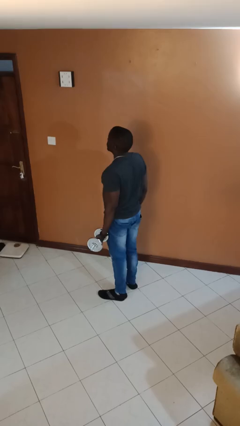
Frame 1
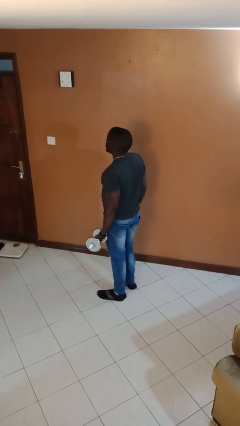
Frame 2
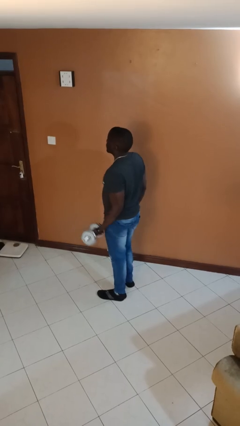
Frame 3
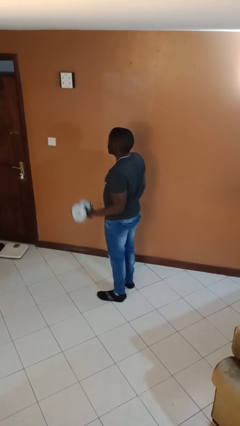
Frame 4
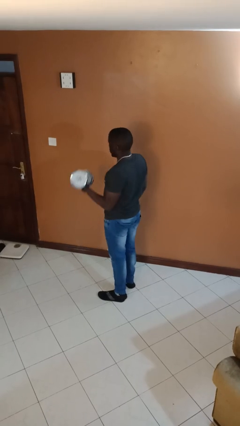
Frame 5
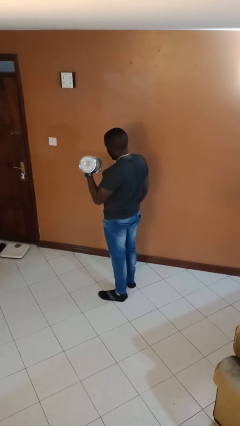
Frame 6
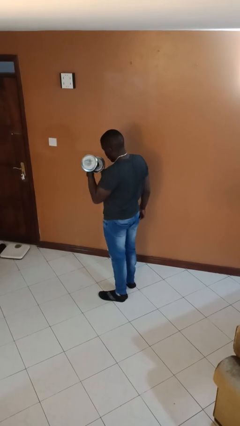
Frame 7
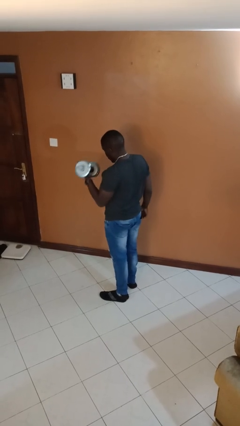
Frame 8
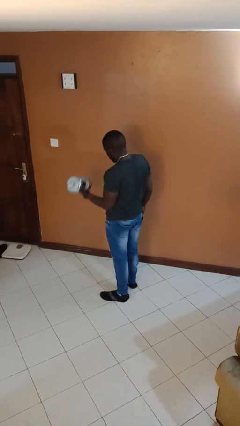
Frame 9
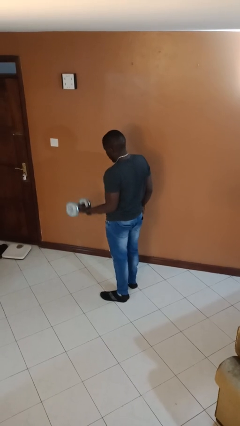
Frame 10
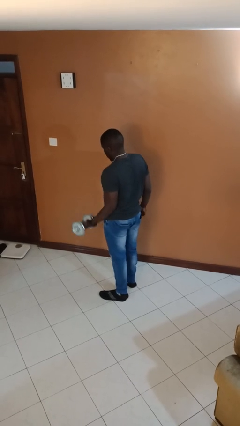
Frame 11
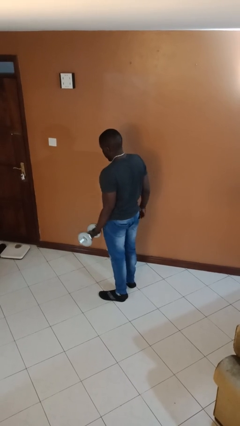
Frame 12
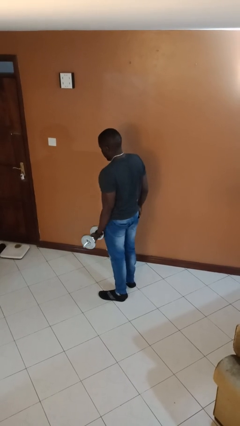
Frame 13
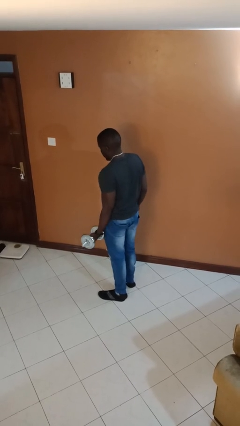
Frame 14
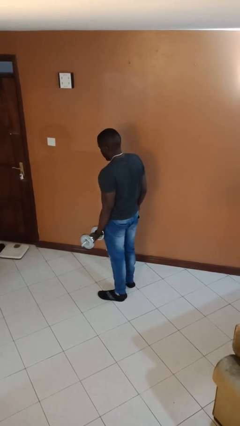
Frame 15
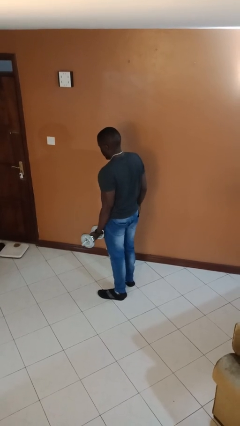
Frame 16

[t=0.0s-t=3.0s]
person lifts dumbbells

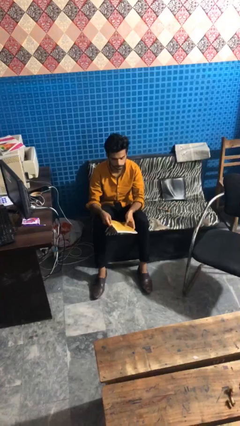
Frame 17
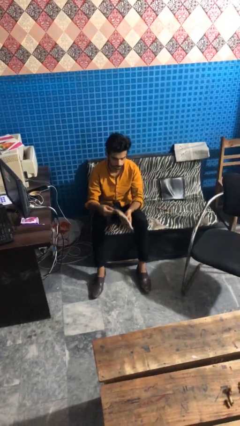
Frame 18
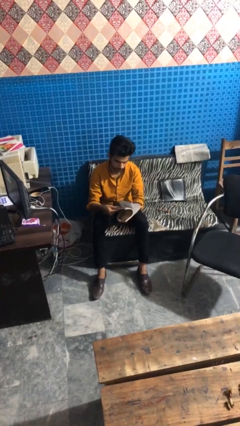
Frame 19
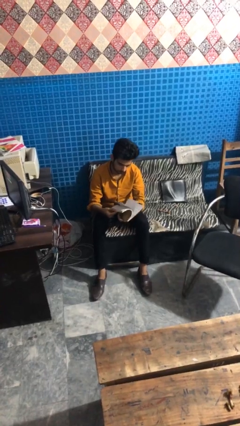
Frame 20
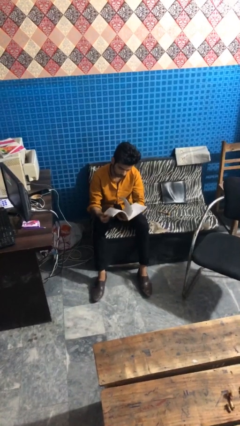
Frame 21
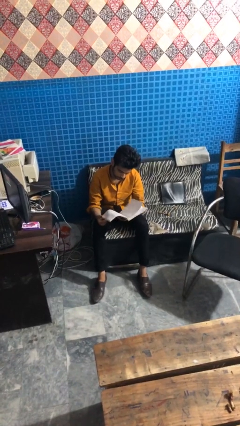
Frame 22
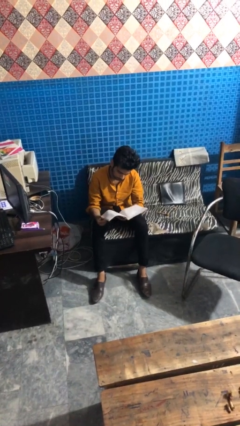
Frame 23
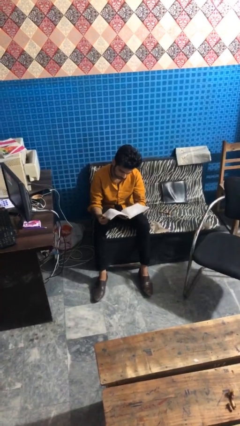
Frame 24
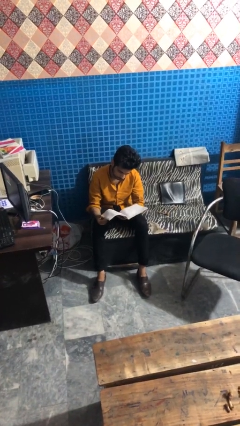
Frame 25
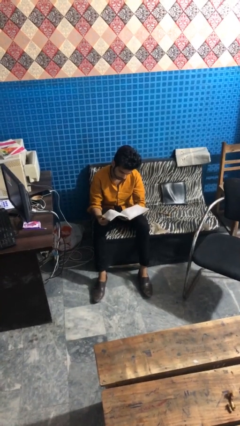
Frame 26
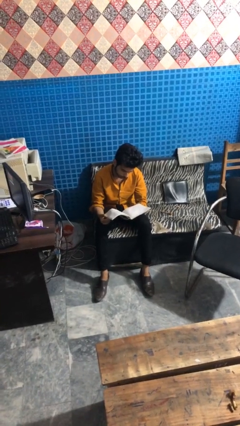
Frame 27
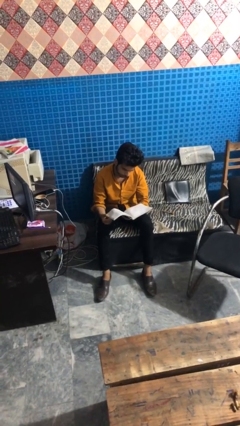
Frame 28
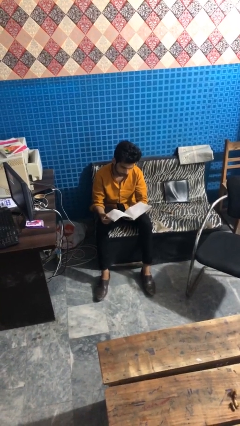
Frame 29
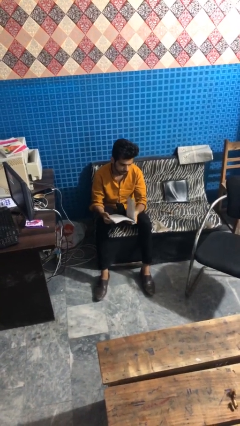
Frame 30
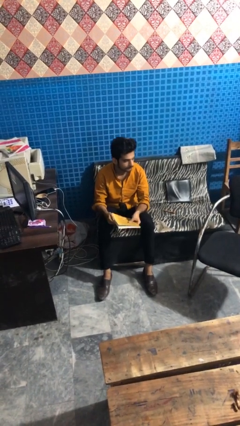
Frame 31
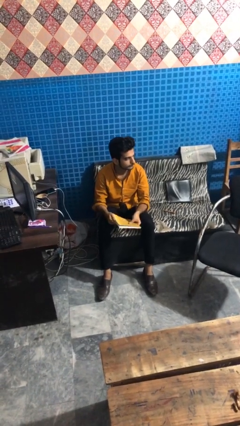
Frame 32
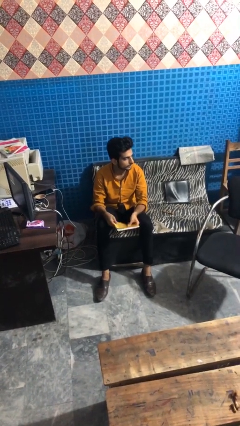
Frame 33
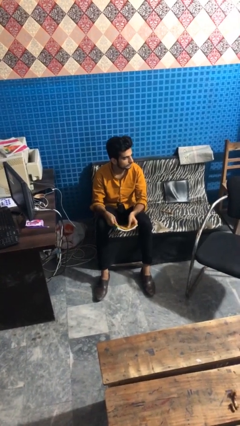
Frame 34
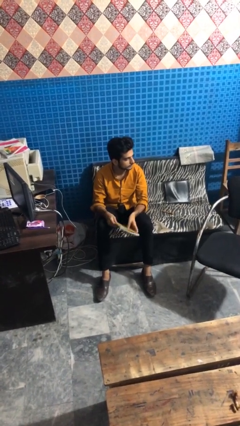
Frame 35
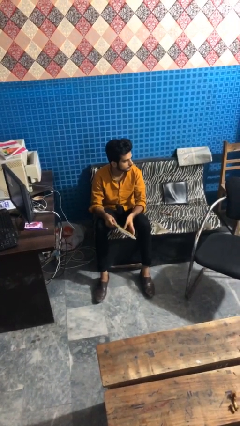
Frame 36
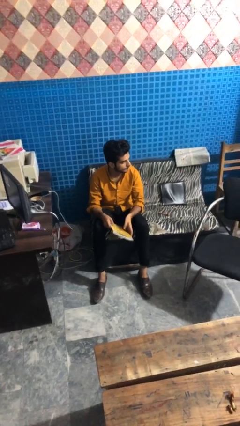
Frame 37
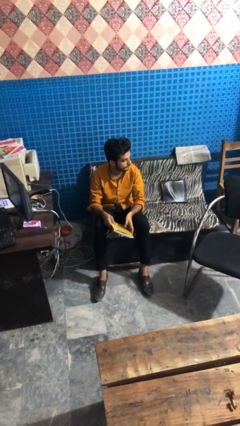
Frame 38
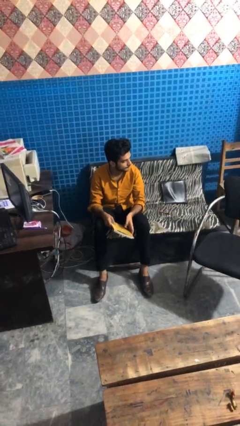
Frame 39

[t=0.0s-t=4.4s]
person reads magazine

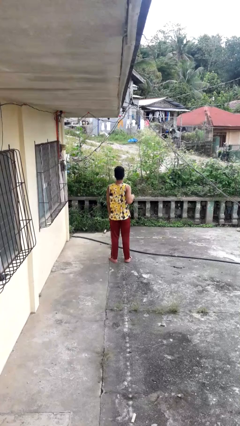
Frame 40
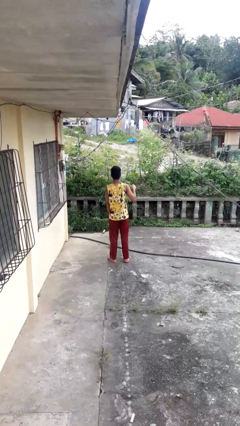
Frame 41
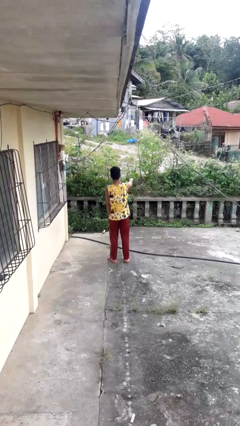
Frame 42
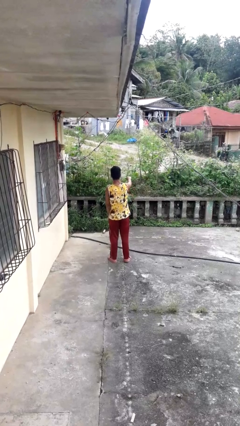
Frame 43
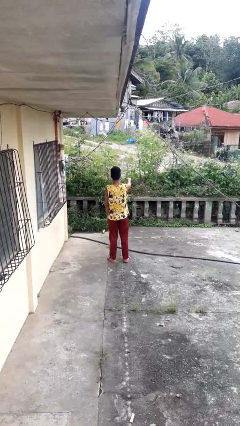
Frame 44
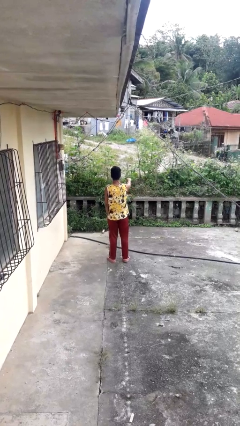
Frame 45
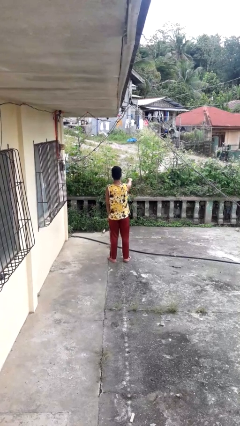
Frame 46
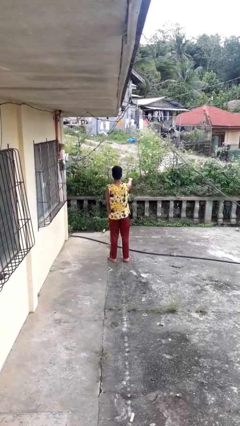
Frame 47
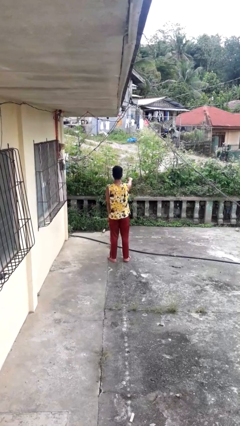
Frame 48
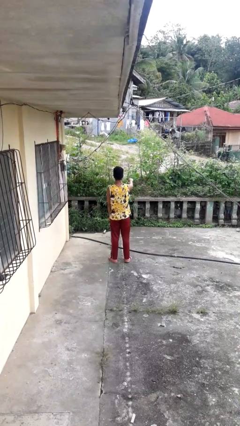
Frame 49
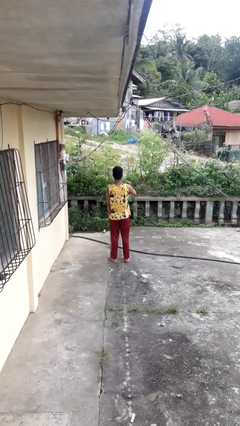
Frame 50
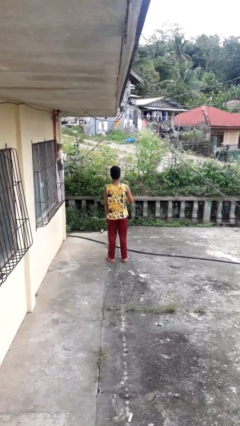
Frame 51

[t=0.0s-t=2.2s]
person punches

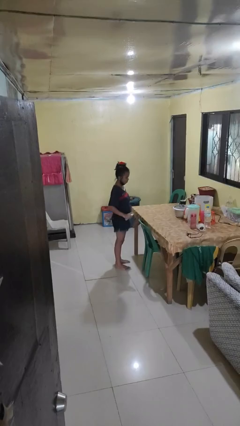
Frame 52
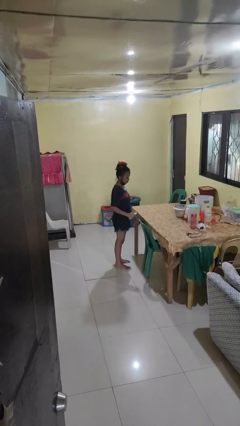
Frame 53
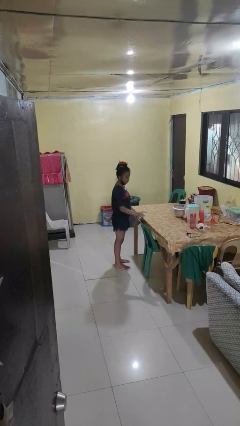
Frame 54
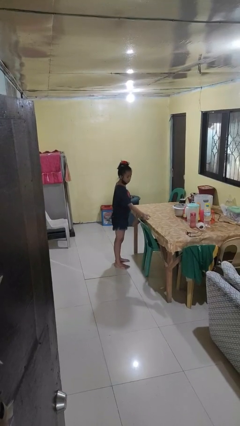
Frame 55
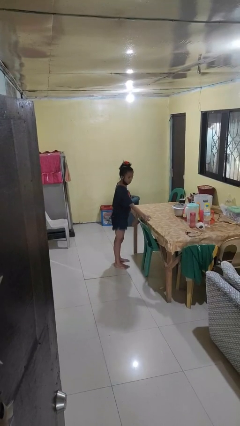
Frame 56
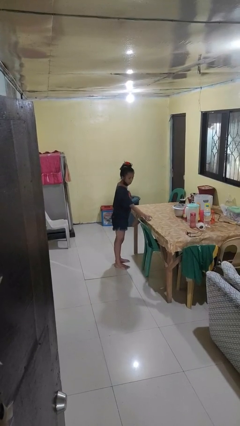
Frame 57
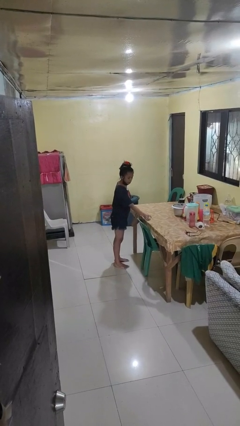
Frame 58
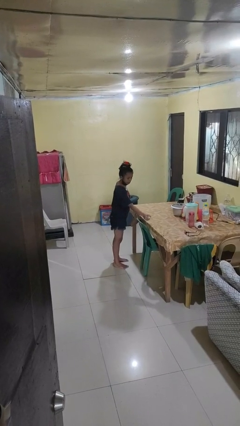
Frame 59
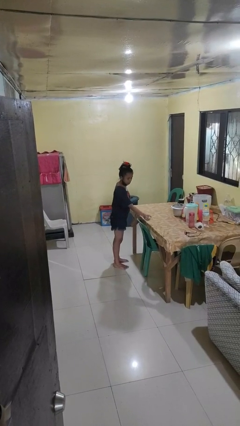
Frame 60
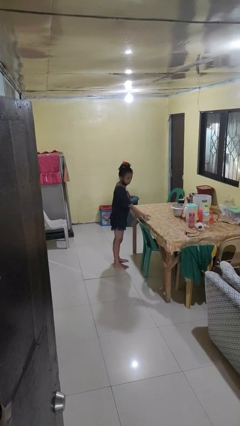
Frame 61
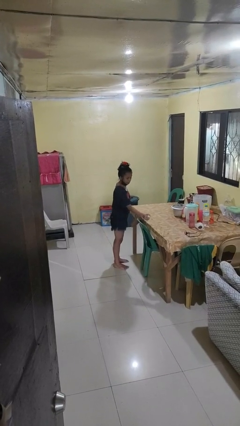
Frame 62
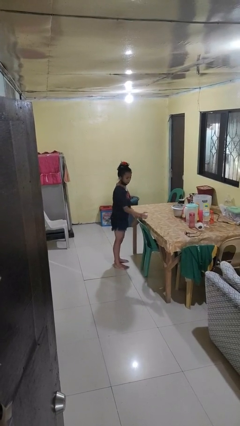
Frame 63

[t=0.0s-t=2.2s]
person sprays from bottle

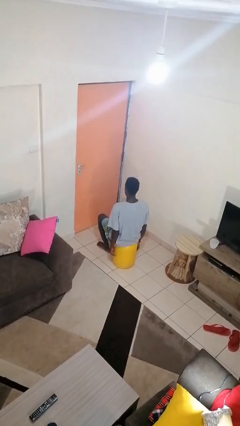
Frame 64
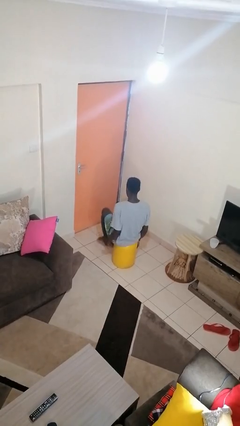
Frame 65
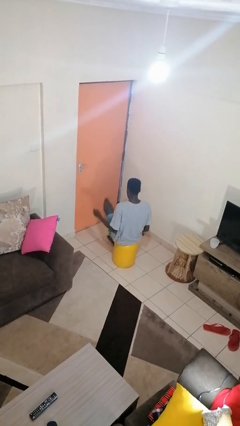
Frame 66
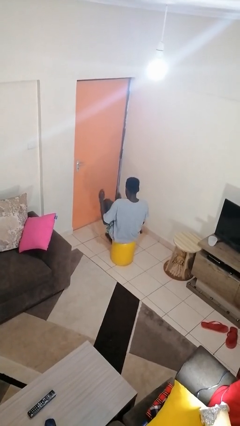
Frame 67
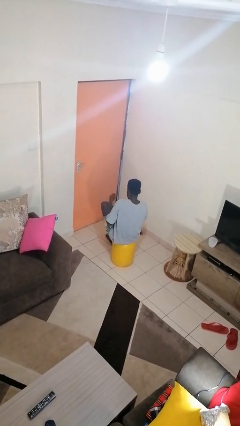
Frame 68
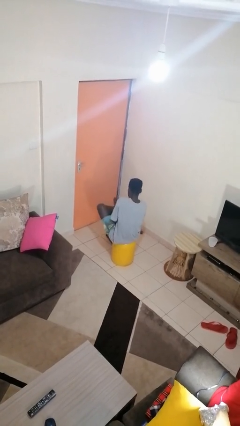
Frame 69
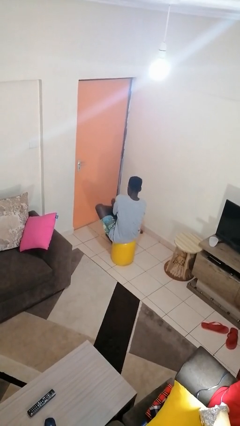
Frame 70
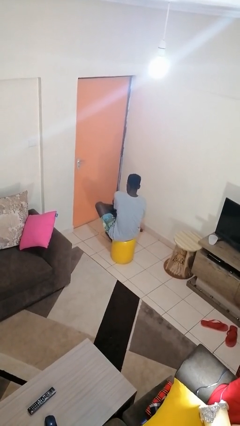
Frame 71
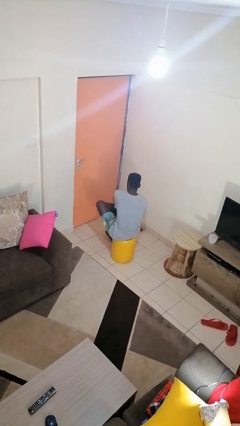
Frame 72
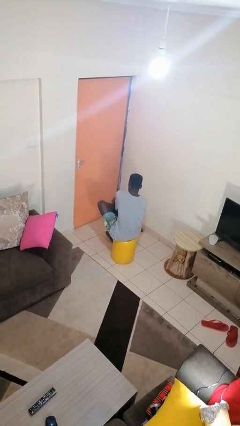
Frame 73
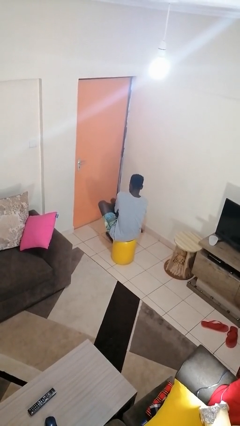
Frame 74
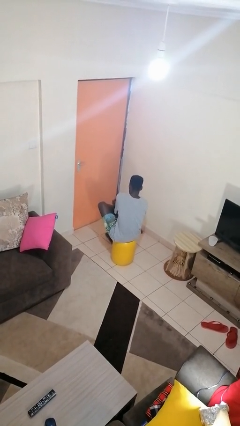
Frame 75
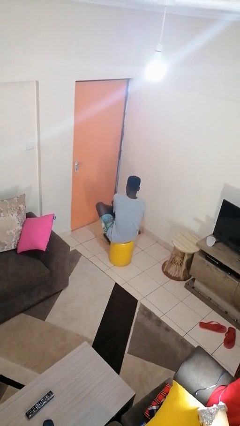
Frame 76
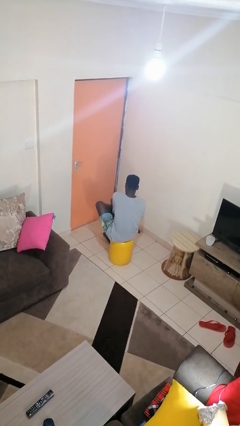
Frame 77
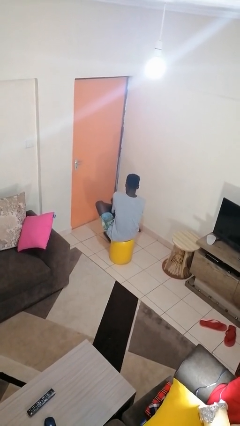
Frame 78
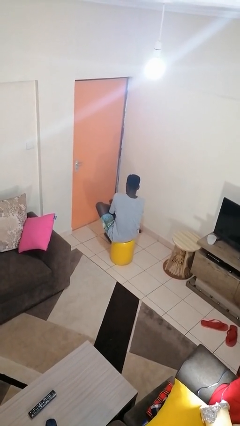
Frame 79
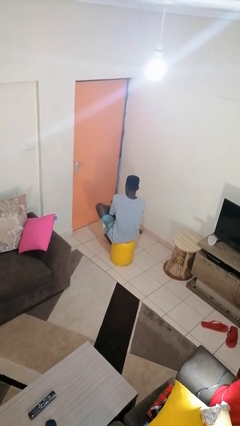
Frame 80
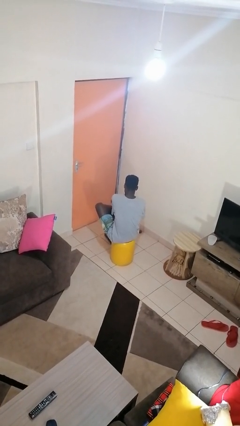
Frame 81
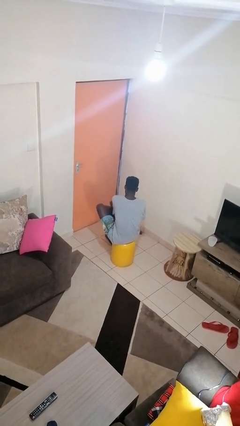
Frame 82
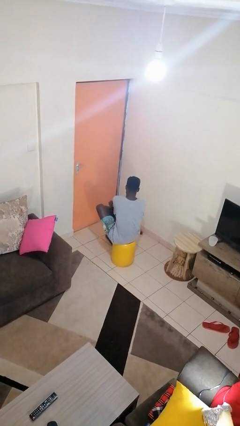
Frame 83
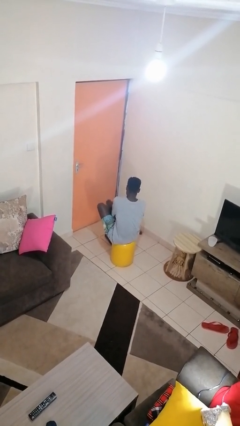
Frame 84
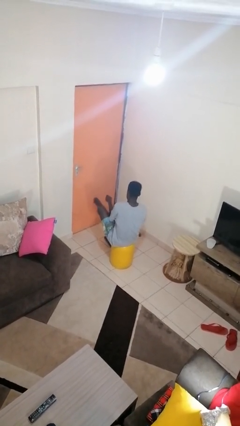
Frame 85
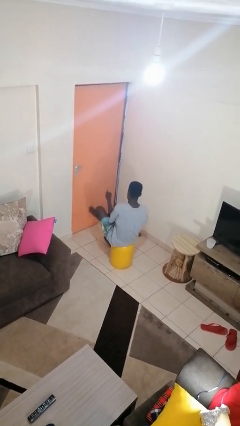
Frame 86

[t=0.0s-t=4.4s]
person rubs foot

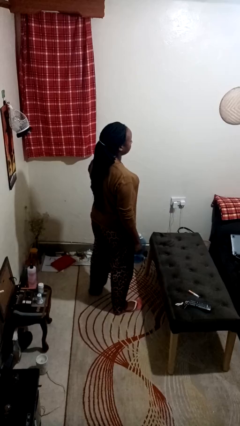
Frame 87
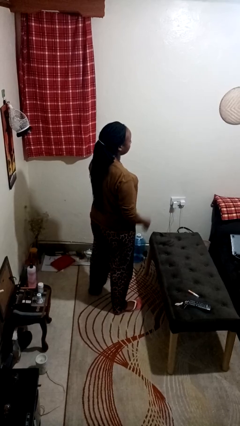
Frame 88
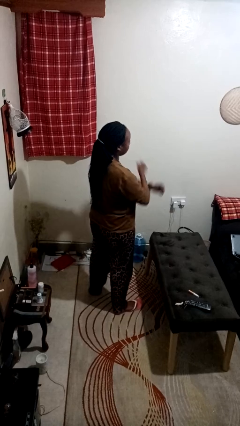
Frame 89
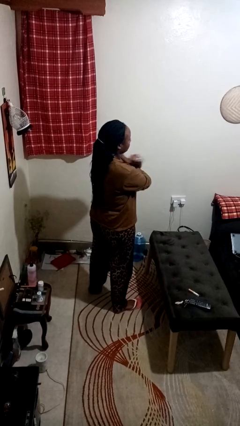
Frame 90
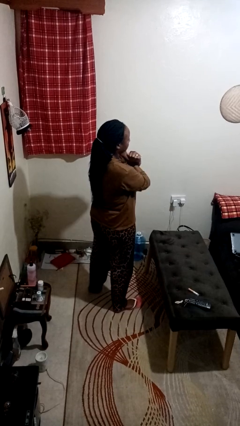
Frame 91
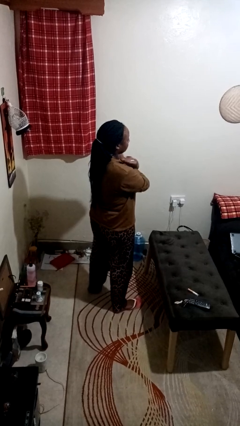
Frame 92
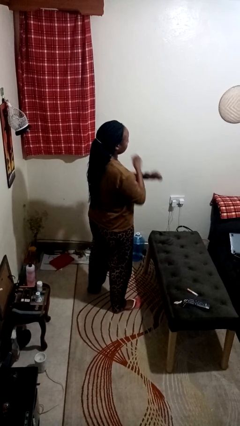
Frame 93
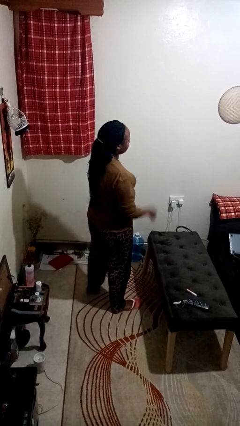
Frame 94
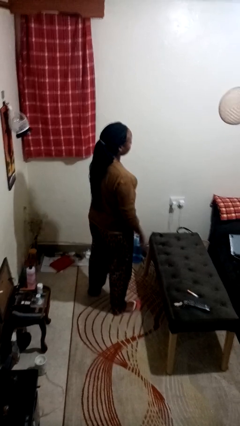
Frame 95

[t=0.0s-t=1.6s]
person gestures arms x
